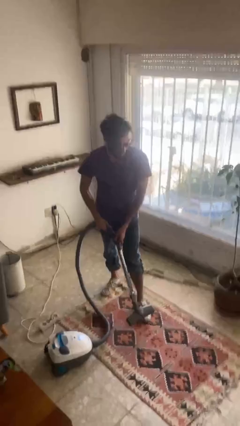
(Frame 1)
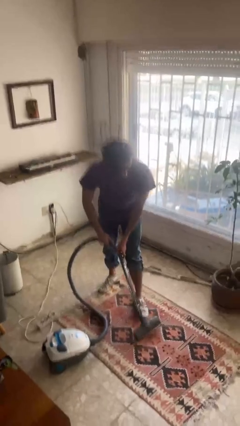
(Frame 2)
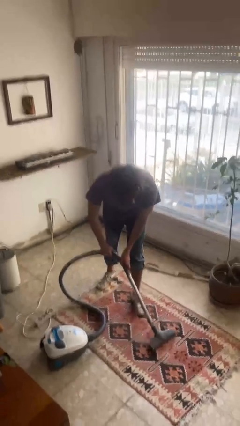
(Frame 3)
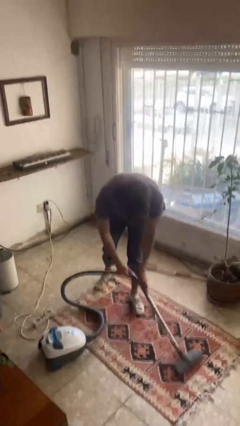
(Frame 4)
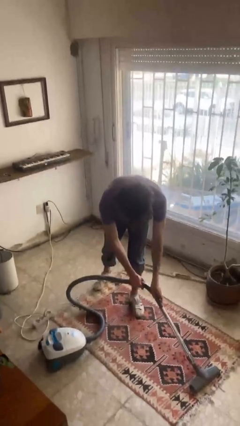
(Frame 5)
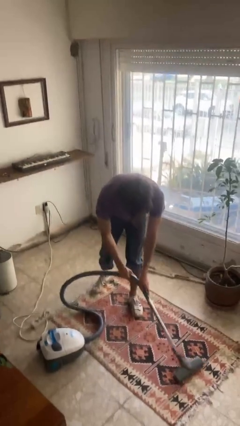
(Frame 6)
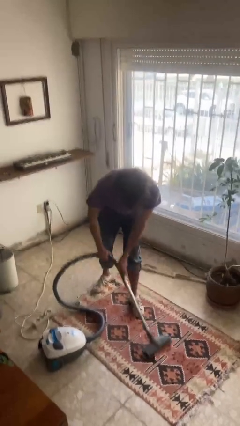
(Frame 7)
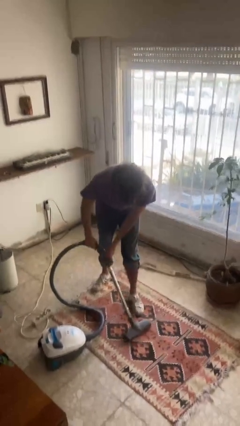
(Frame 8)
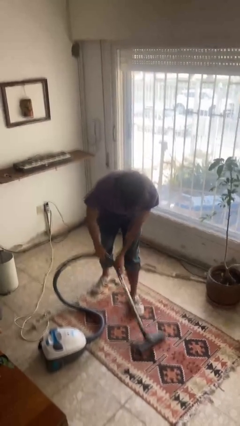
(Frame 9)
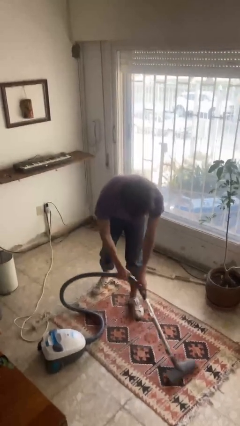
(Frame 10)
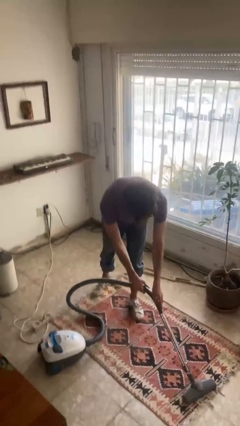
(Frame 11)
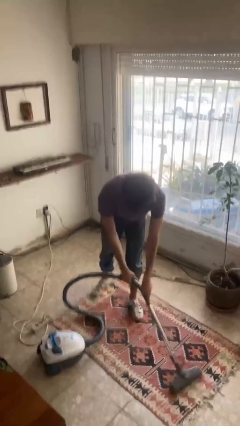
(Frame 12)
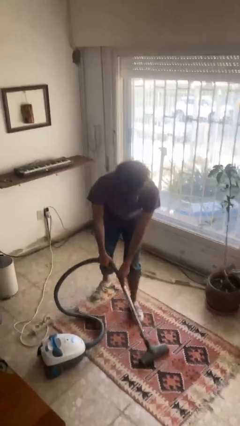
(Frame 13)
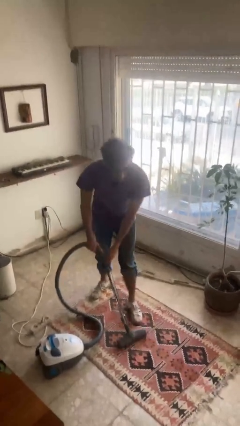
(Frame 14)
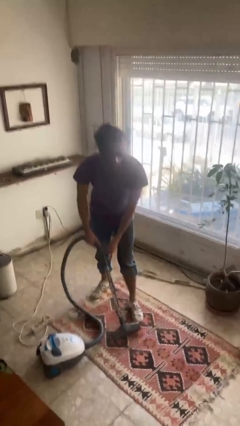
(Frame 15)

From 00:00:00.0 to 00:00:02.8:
person vacuums carpet

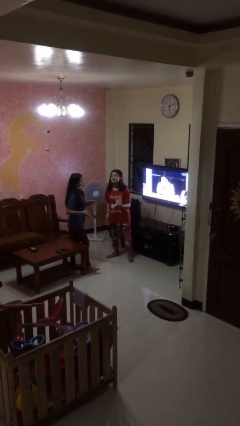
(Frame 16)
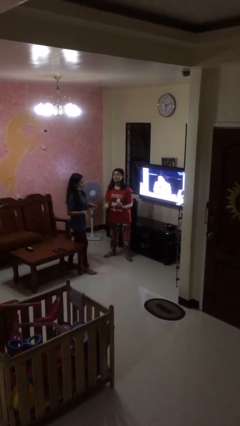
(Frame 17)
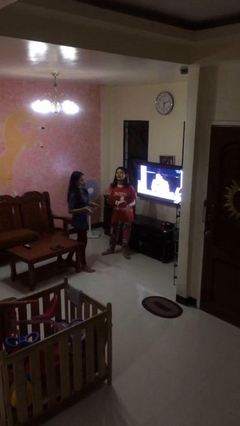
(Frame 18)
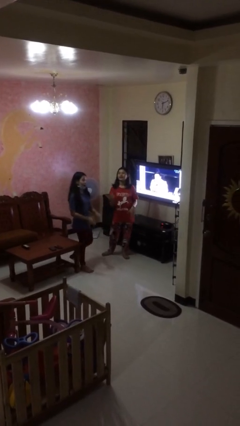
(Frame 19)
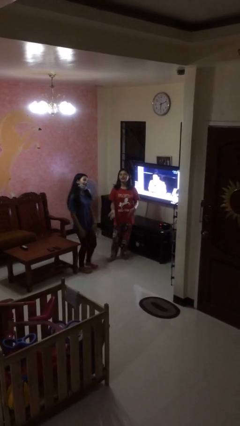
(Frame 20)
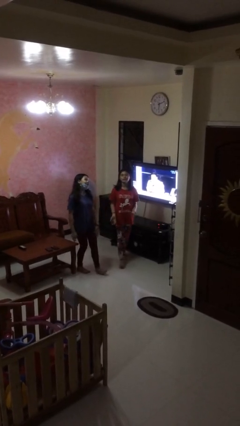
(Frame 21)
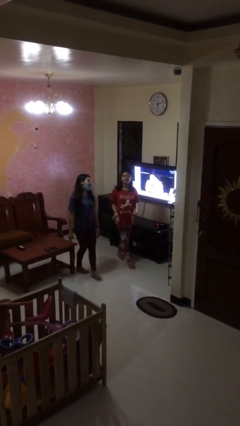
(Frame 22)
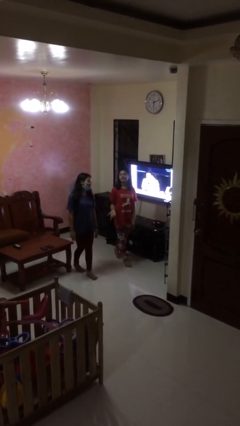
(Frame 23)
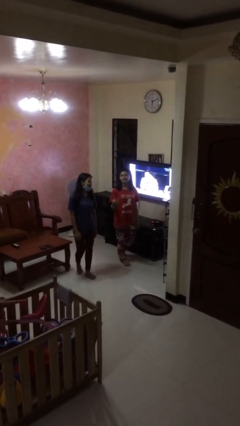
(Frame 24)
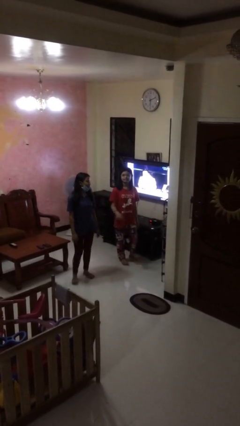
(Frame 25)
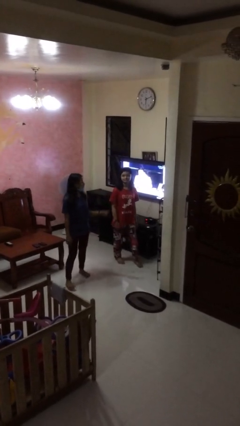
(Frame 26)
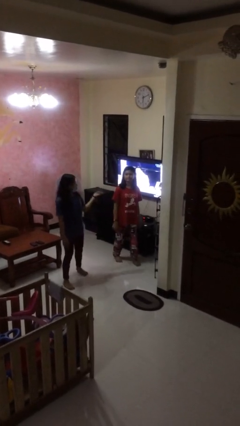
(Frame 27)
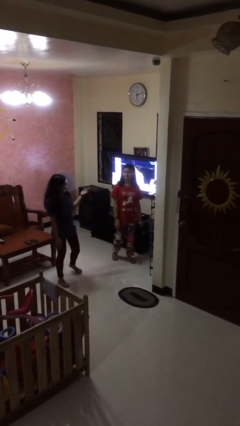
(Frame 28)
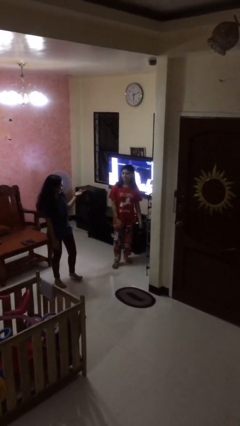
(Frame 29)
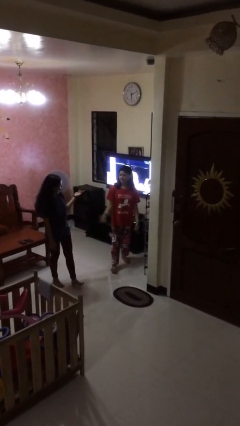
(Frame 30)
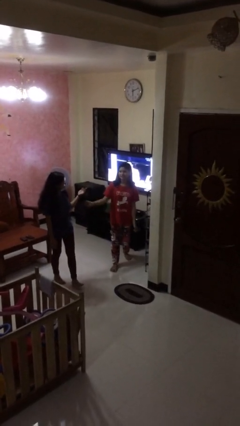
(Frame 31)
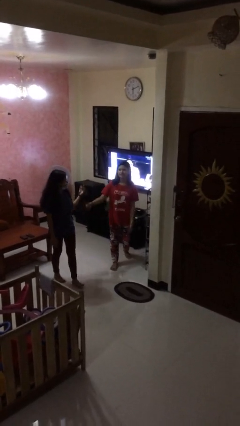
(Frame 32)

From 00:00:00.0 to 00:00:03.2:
person talks to person

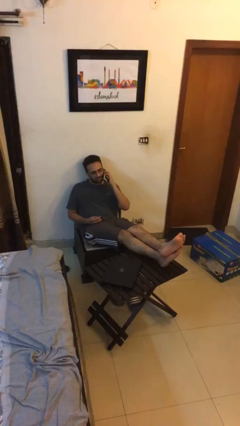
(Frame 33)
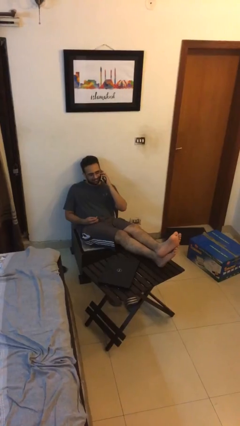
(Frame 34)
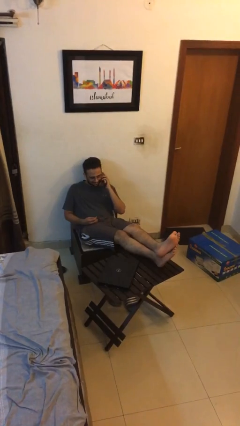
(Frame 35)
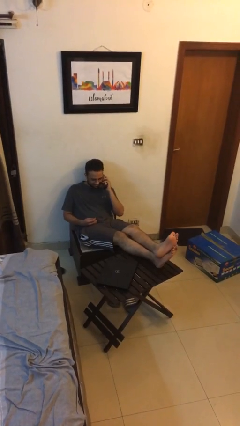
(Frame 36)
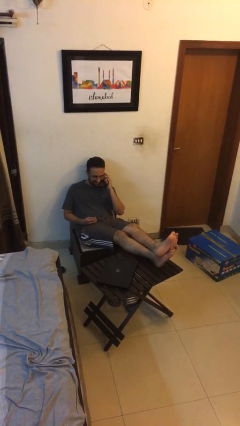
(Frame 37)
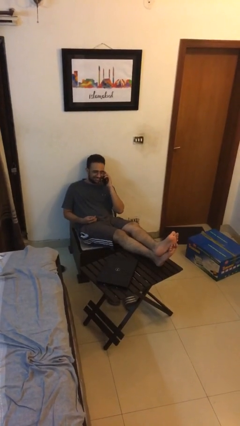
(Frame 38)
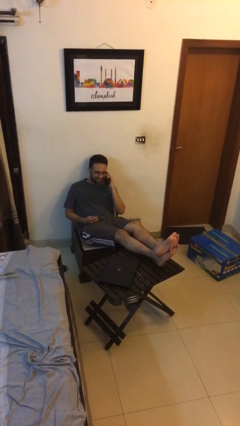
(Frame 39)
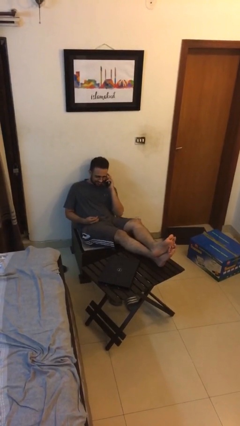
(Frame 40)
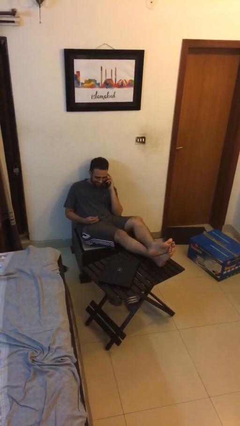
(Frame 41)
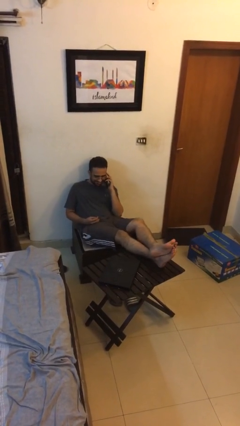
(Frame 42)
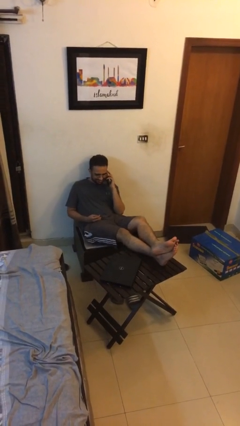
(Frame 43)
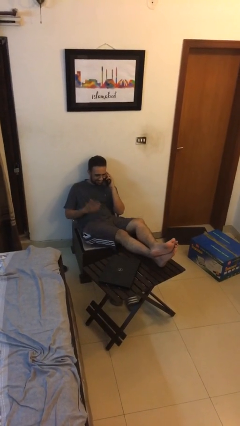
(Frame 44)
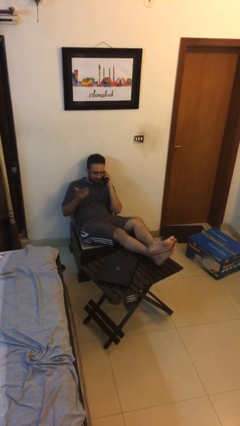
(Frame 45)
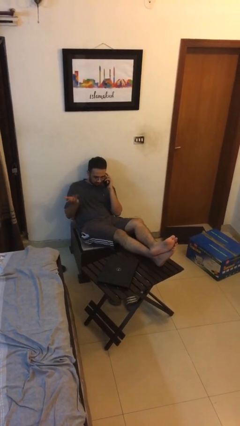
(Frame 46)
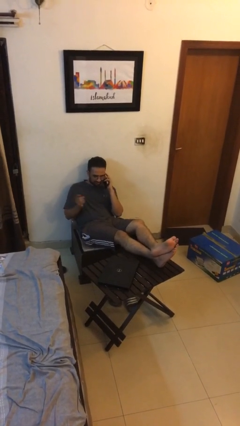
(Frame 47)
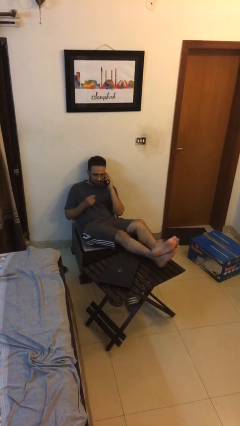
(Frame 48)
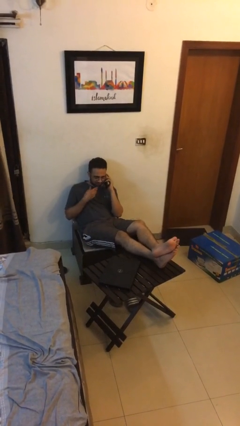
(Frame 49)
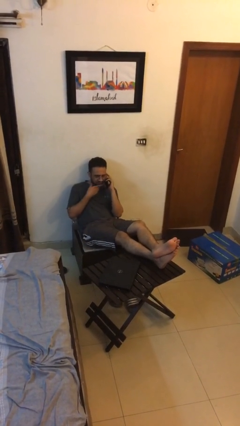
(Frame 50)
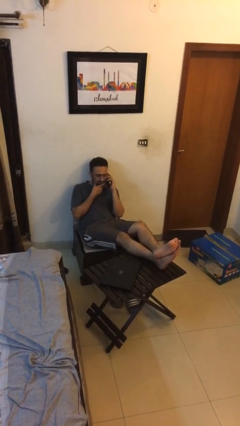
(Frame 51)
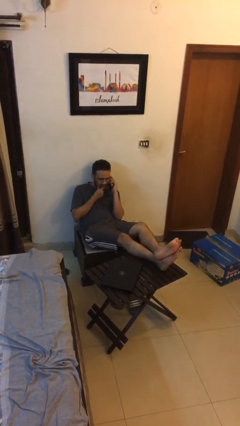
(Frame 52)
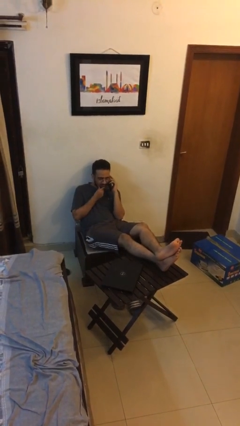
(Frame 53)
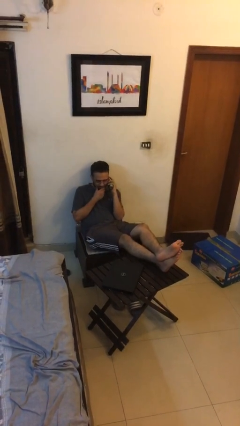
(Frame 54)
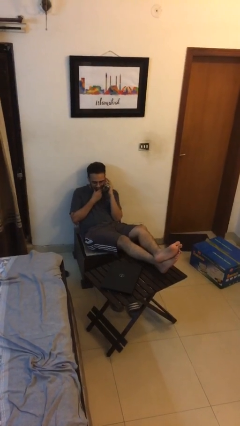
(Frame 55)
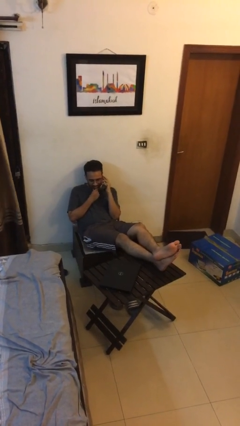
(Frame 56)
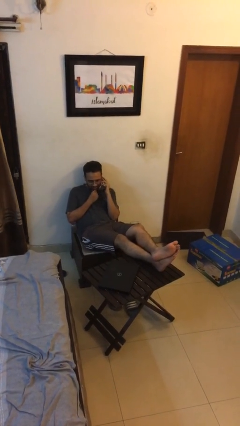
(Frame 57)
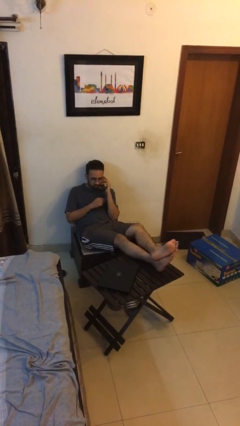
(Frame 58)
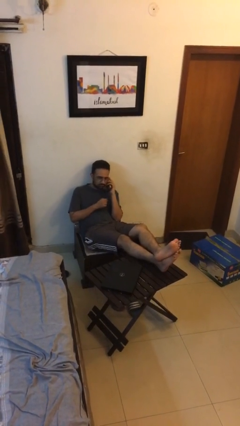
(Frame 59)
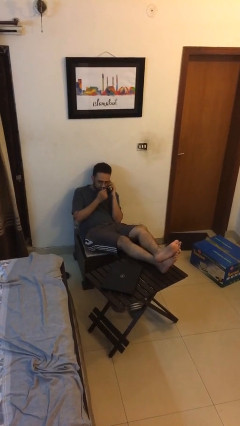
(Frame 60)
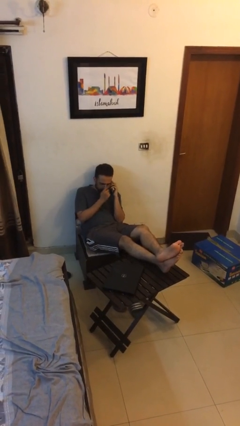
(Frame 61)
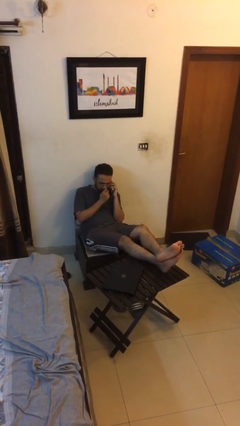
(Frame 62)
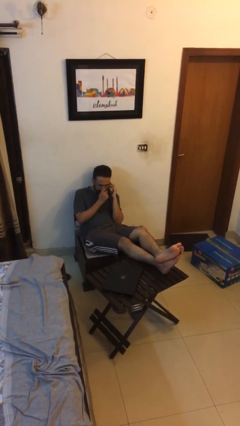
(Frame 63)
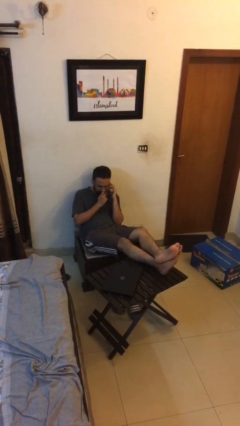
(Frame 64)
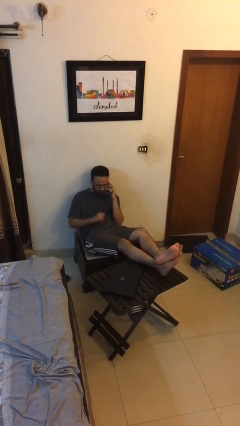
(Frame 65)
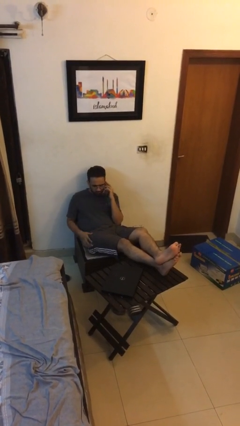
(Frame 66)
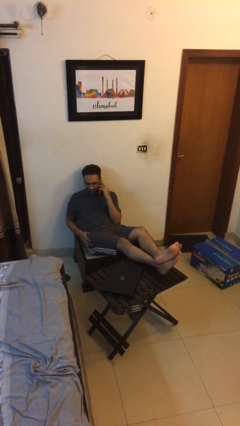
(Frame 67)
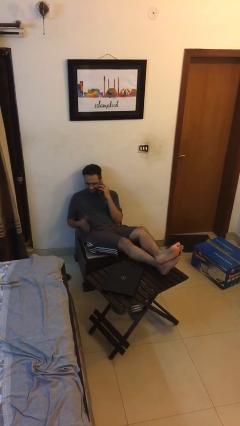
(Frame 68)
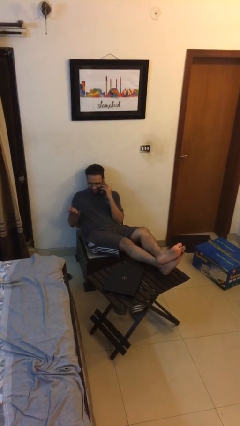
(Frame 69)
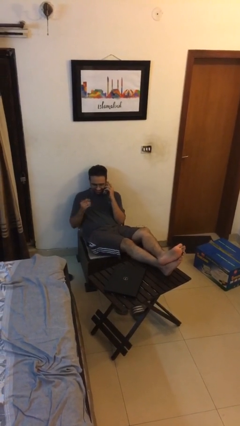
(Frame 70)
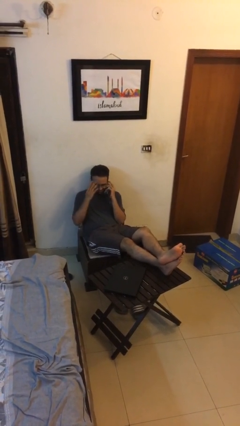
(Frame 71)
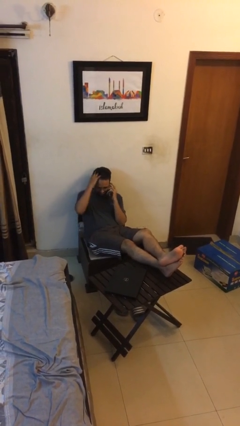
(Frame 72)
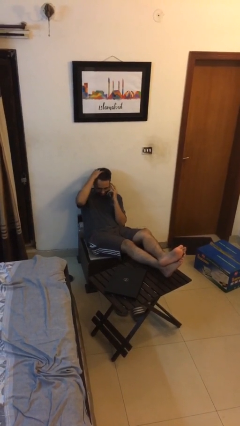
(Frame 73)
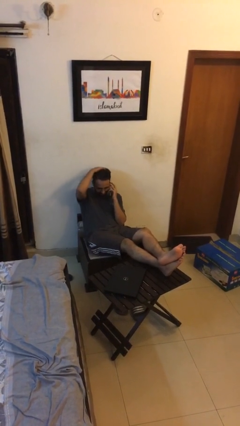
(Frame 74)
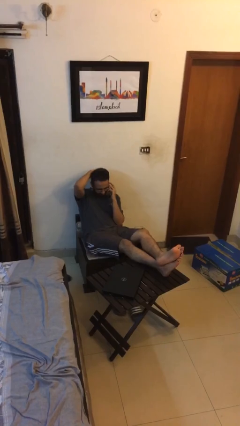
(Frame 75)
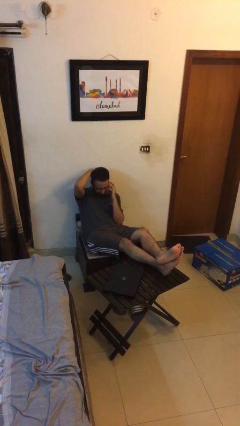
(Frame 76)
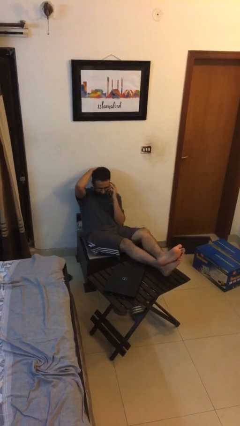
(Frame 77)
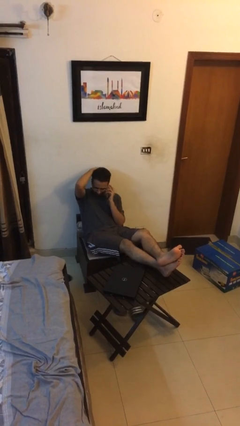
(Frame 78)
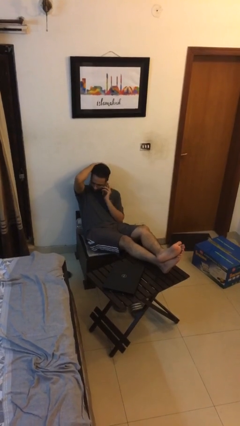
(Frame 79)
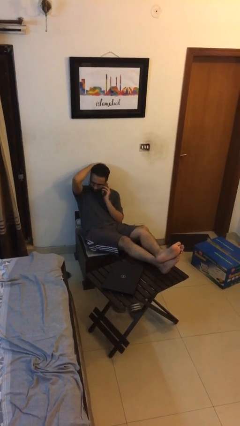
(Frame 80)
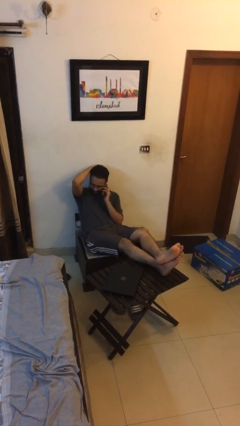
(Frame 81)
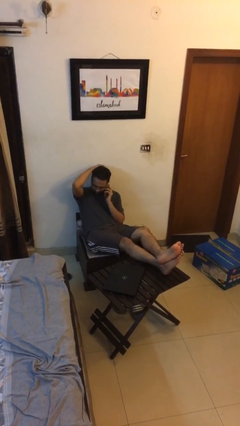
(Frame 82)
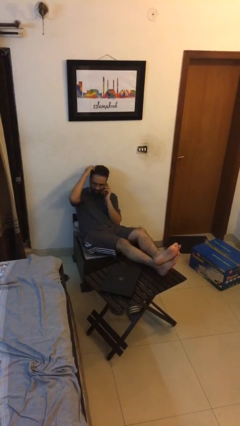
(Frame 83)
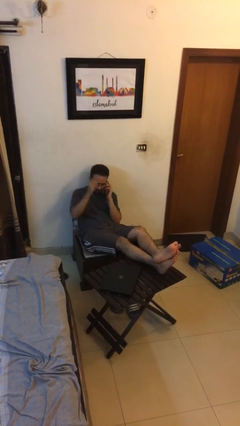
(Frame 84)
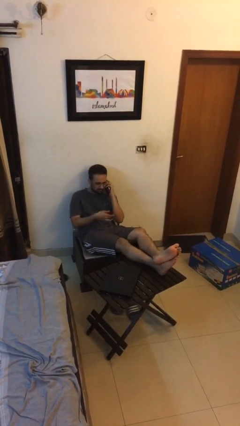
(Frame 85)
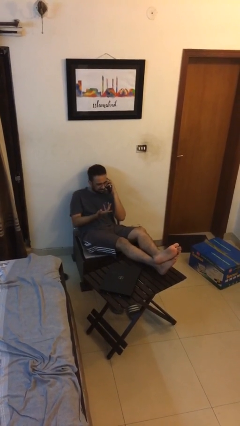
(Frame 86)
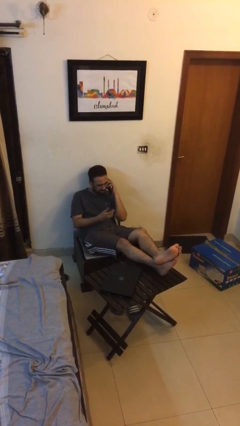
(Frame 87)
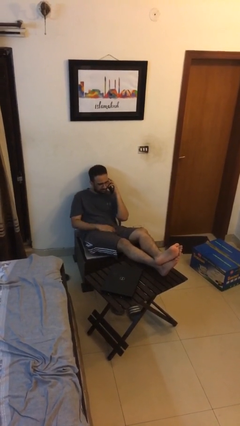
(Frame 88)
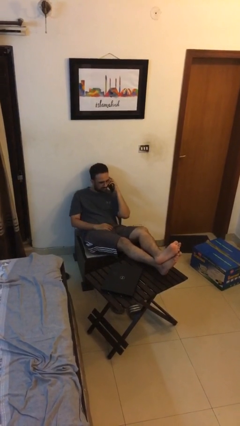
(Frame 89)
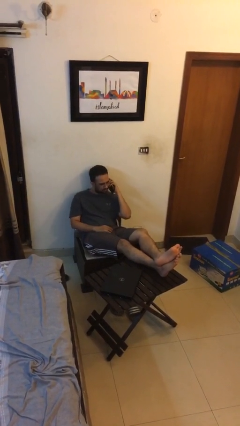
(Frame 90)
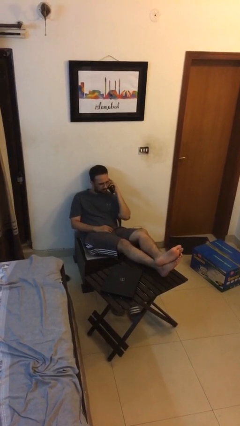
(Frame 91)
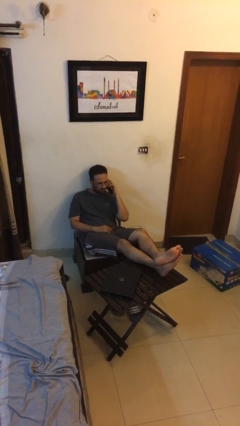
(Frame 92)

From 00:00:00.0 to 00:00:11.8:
person talks on phone
